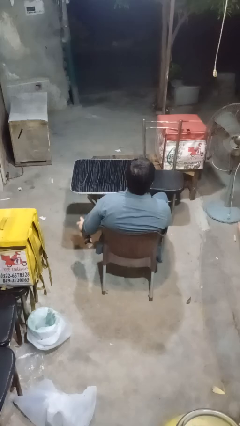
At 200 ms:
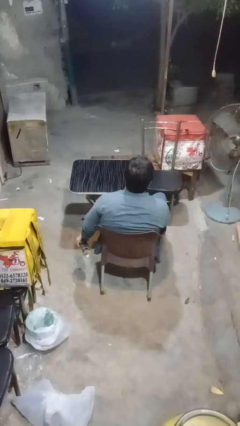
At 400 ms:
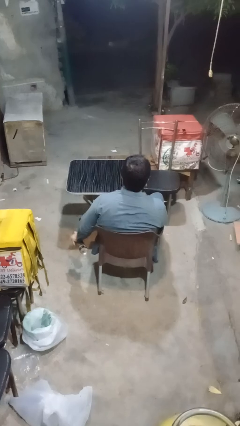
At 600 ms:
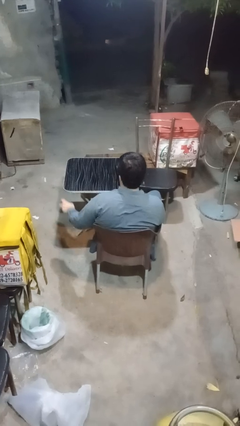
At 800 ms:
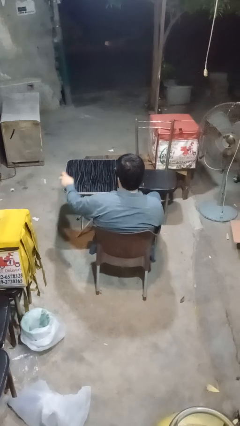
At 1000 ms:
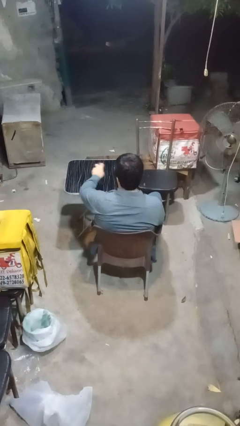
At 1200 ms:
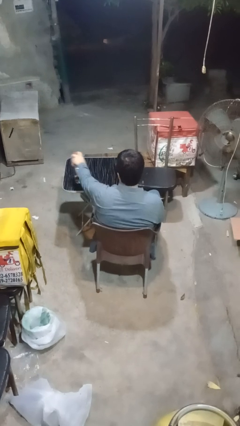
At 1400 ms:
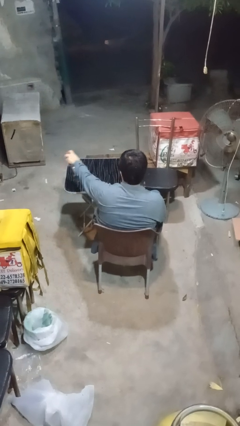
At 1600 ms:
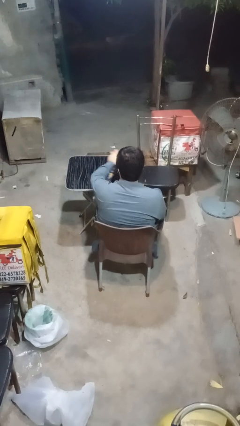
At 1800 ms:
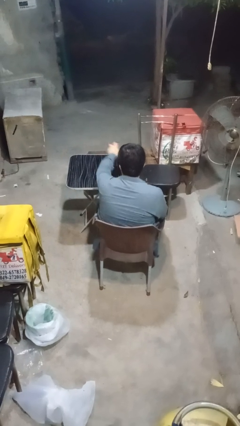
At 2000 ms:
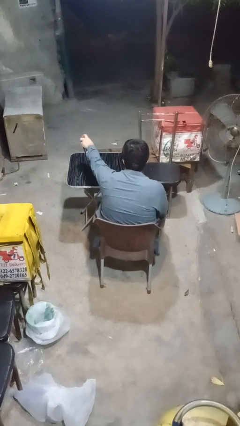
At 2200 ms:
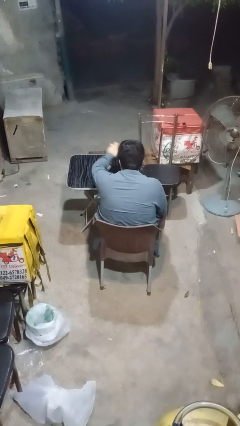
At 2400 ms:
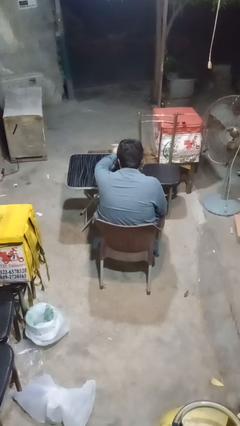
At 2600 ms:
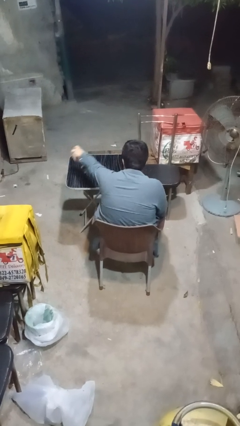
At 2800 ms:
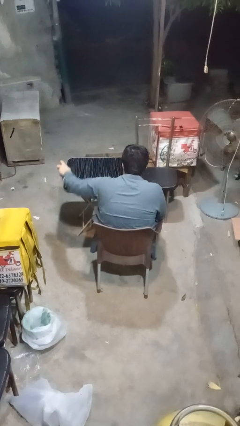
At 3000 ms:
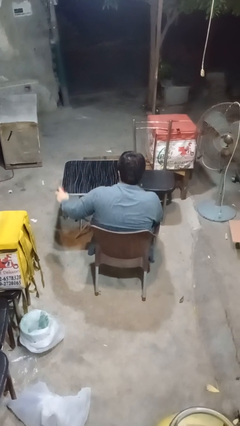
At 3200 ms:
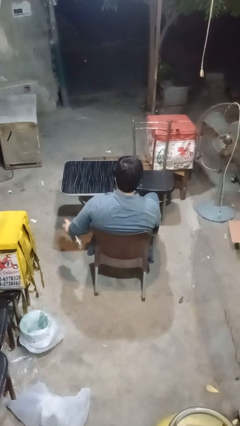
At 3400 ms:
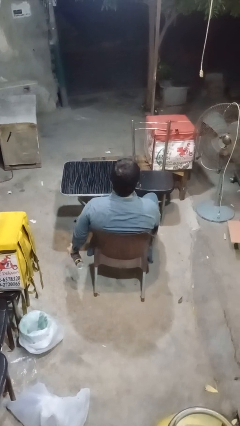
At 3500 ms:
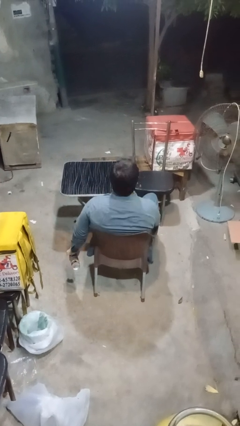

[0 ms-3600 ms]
person sprays from bottle

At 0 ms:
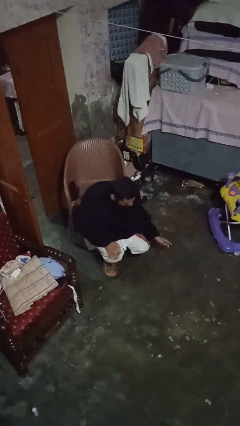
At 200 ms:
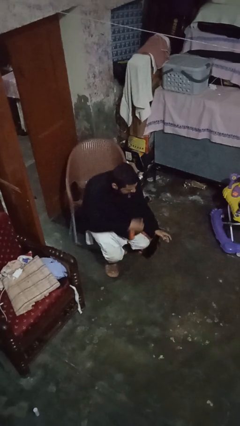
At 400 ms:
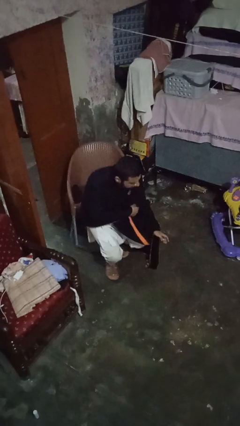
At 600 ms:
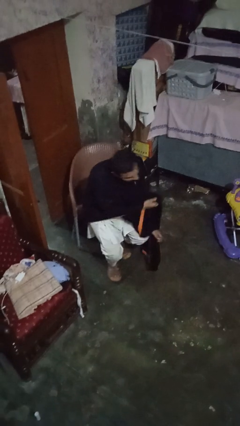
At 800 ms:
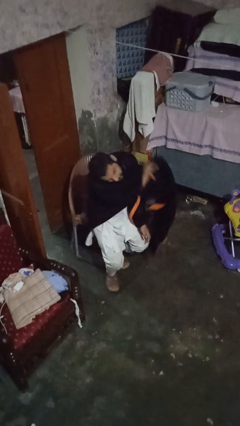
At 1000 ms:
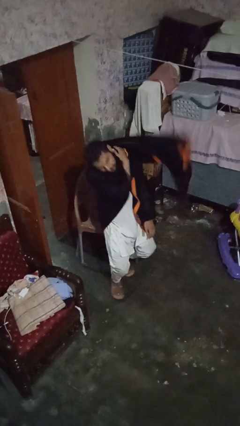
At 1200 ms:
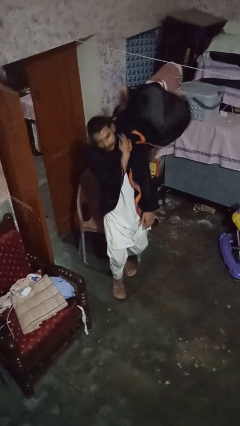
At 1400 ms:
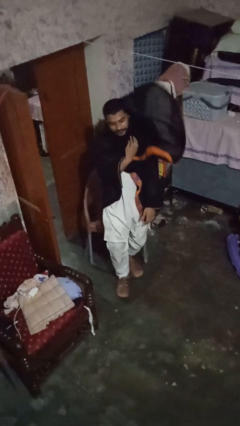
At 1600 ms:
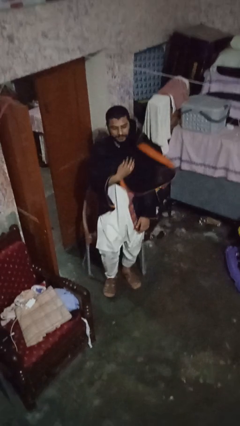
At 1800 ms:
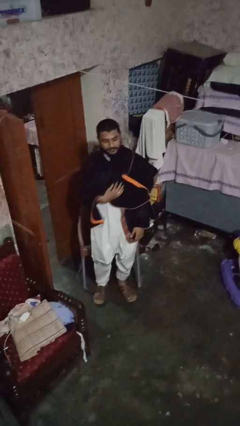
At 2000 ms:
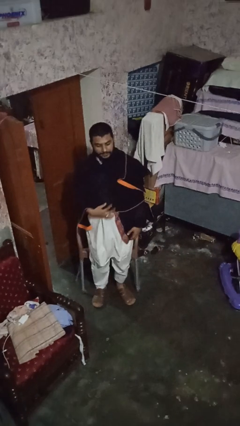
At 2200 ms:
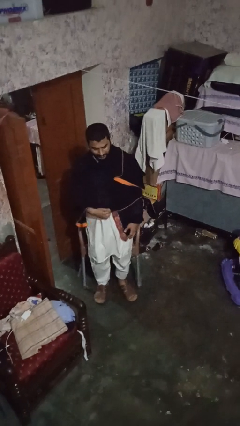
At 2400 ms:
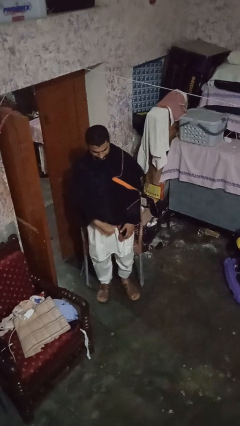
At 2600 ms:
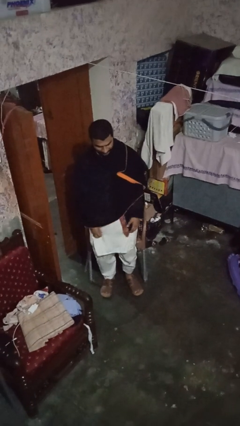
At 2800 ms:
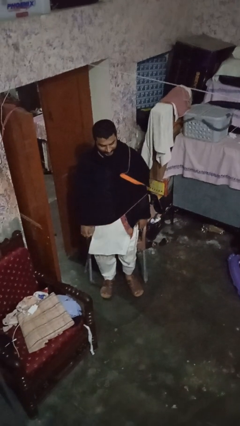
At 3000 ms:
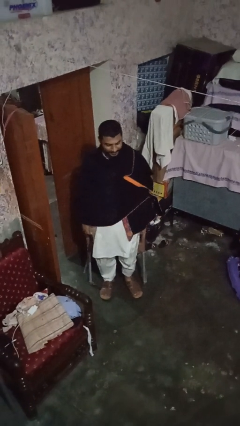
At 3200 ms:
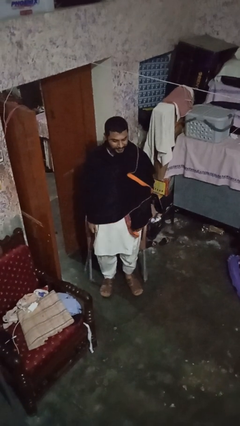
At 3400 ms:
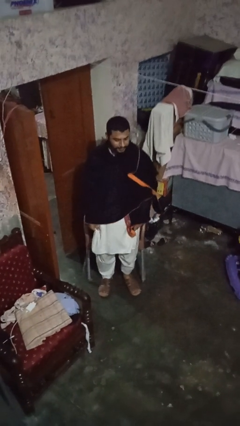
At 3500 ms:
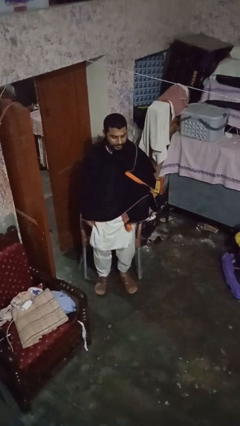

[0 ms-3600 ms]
person stands up from floor

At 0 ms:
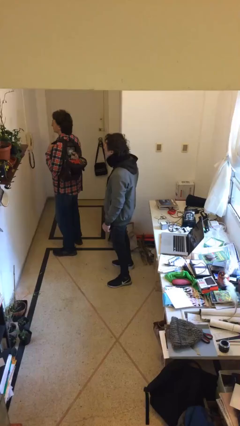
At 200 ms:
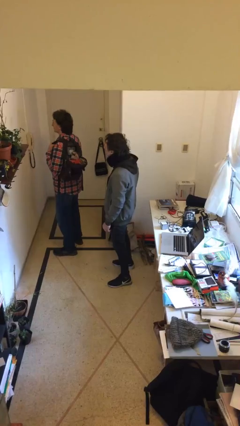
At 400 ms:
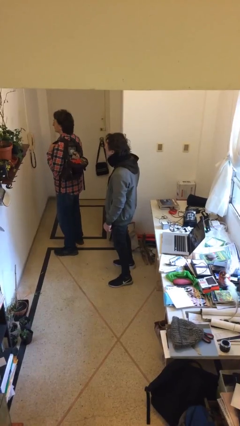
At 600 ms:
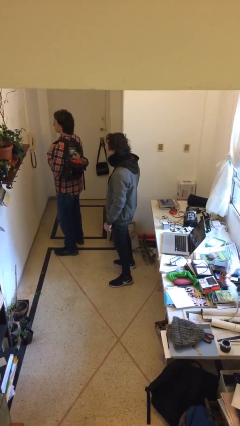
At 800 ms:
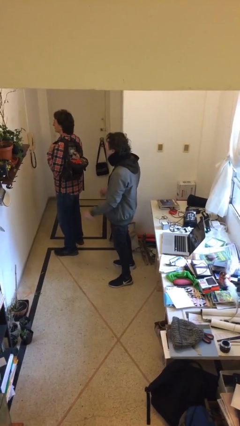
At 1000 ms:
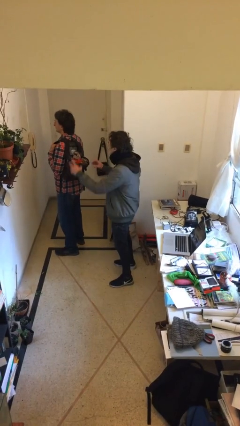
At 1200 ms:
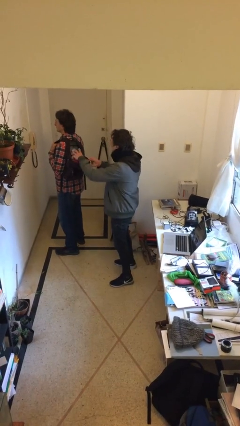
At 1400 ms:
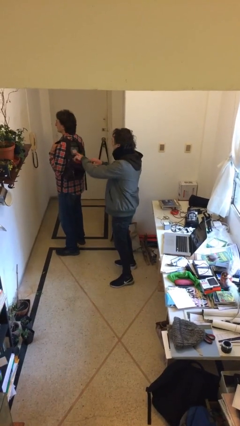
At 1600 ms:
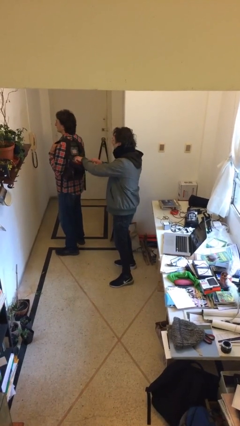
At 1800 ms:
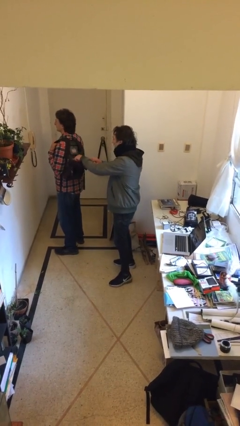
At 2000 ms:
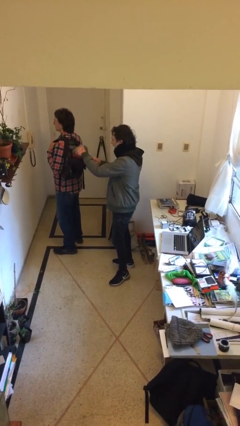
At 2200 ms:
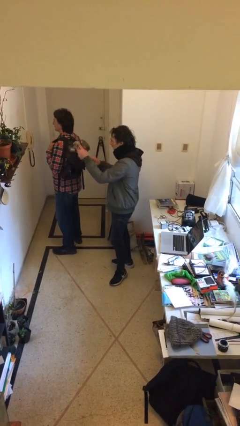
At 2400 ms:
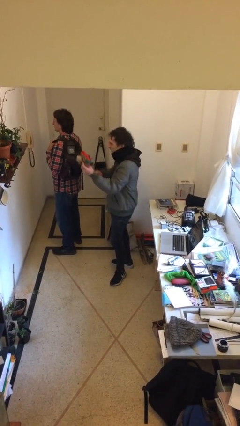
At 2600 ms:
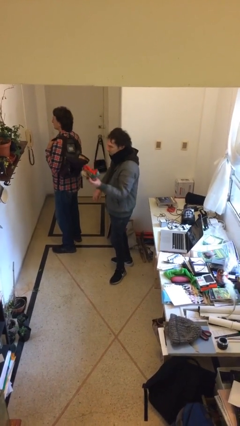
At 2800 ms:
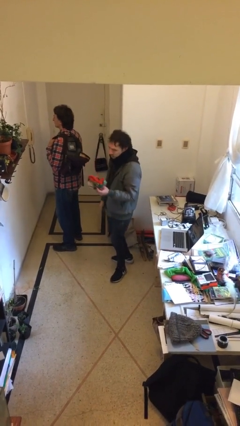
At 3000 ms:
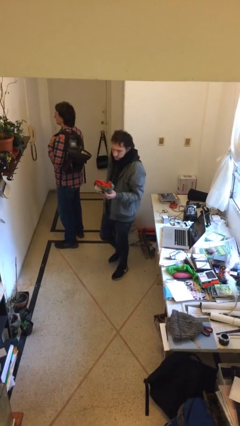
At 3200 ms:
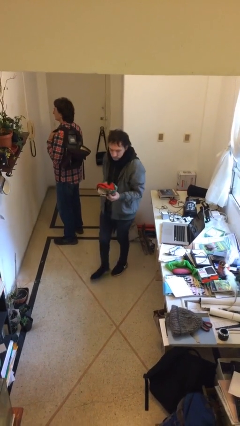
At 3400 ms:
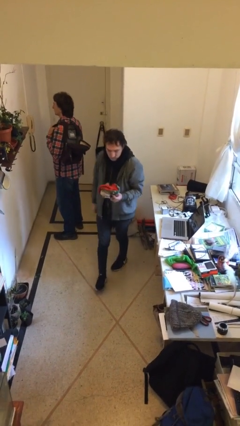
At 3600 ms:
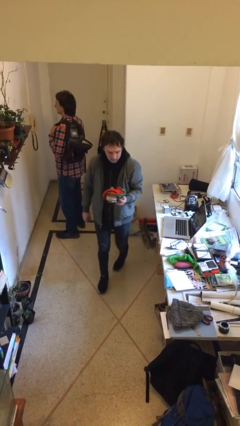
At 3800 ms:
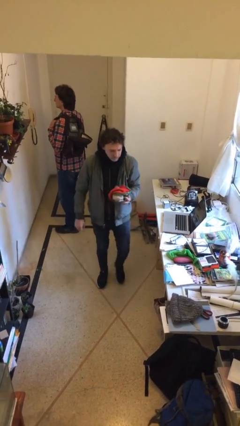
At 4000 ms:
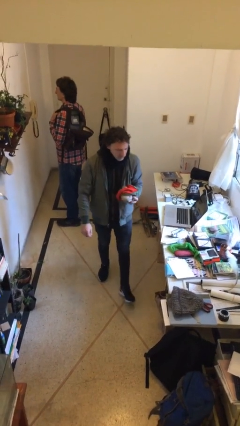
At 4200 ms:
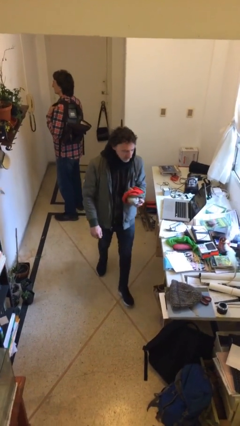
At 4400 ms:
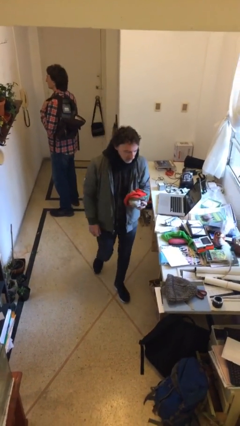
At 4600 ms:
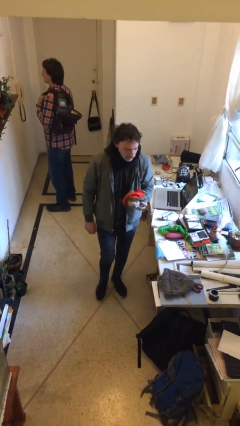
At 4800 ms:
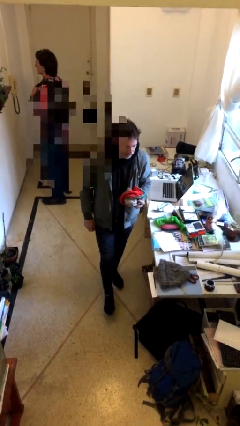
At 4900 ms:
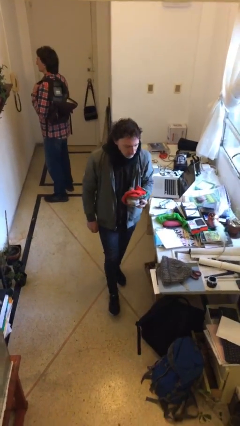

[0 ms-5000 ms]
person steals object from person

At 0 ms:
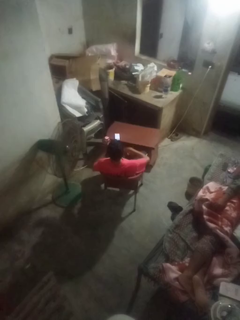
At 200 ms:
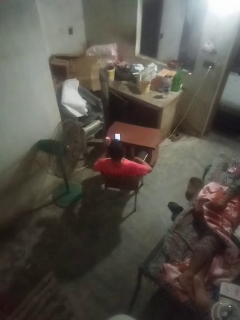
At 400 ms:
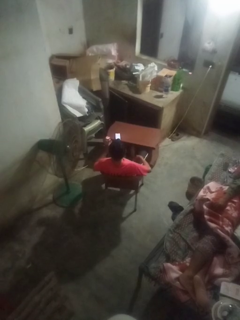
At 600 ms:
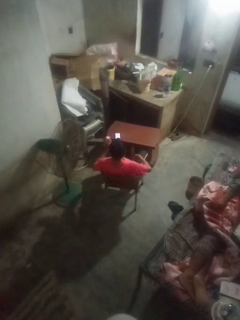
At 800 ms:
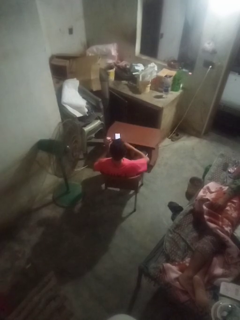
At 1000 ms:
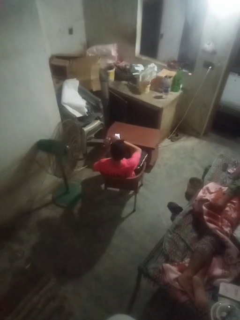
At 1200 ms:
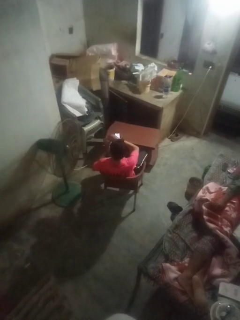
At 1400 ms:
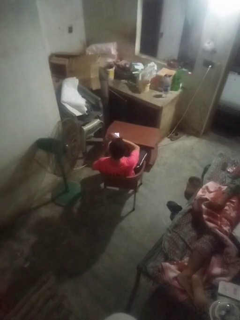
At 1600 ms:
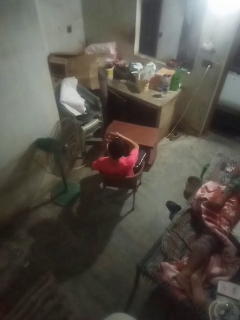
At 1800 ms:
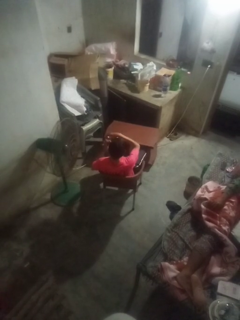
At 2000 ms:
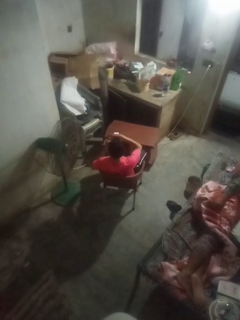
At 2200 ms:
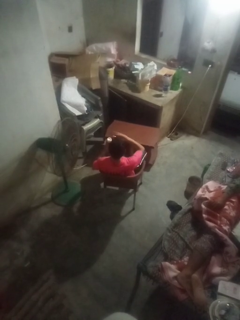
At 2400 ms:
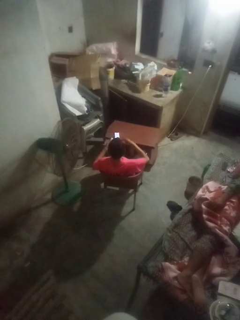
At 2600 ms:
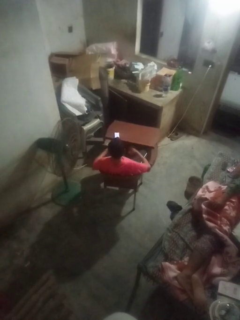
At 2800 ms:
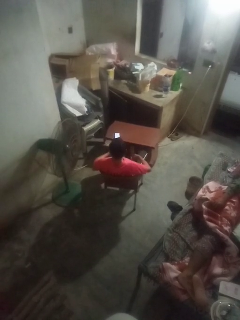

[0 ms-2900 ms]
person opens jar

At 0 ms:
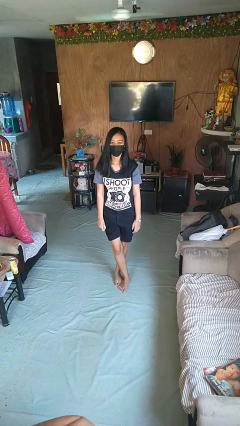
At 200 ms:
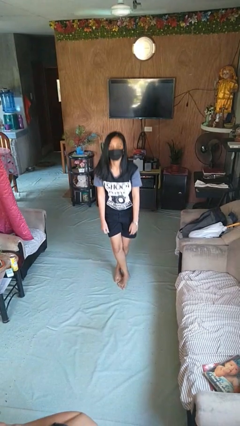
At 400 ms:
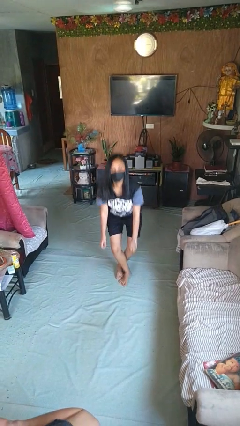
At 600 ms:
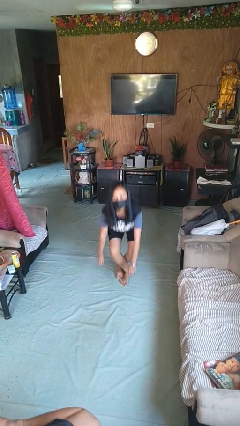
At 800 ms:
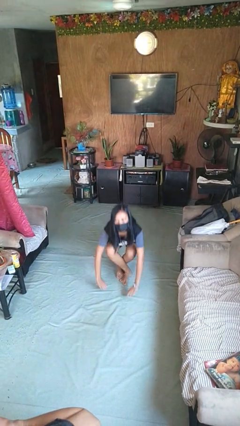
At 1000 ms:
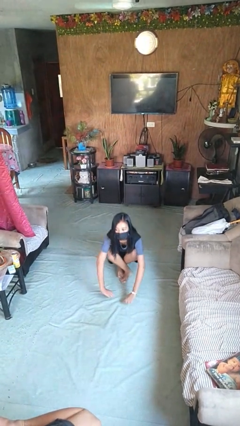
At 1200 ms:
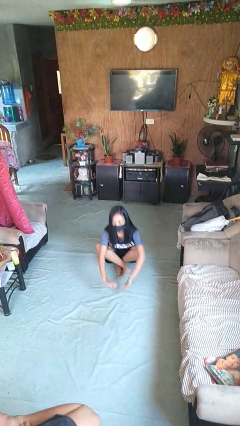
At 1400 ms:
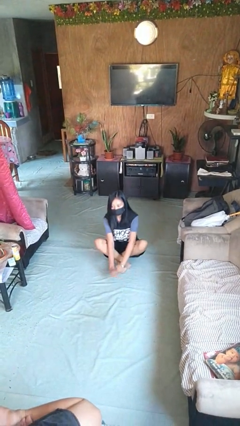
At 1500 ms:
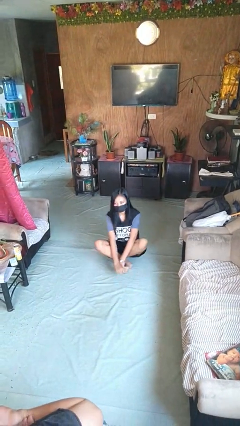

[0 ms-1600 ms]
person sits crisscross

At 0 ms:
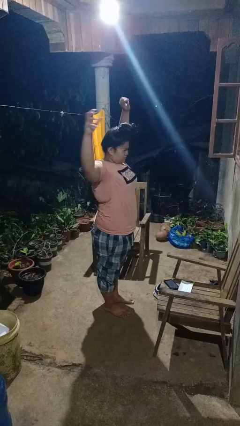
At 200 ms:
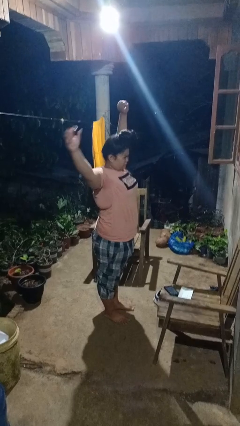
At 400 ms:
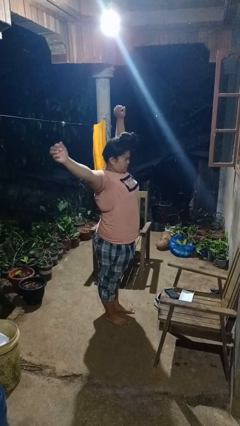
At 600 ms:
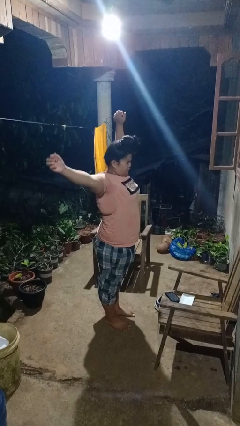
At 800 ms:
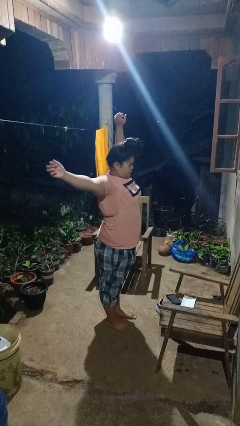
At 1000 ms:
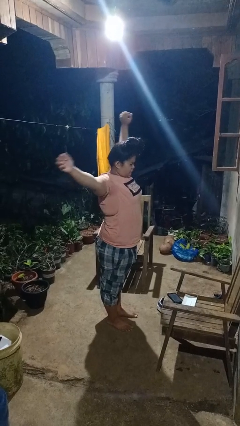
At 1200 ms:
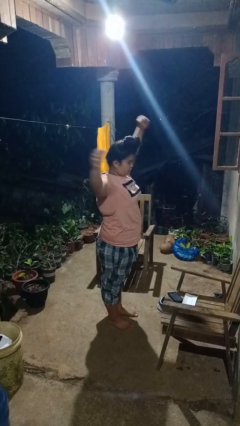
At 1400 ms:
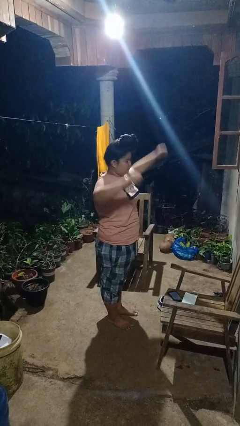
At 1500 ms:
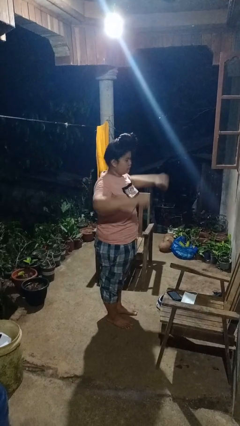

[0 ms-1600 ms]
person stretches arms over head

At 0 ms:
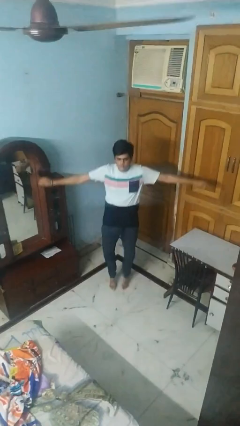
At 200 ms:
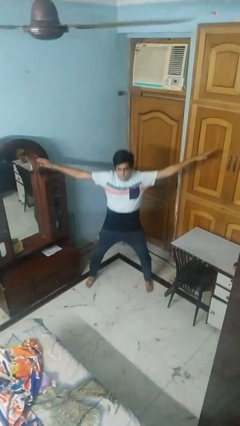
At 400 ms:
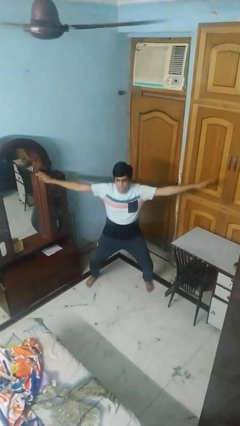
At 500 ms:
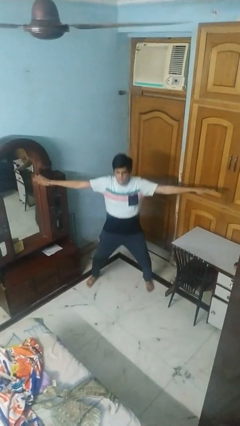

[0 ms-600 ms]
person exercises with jumping jacks
